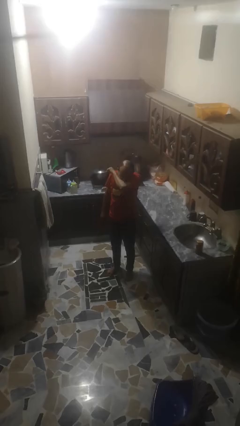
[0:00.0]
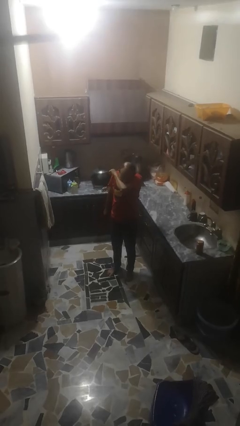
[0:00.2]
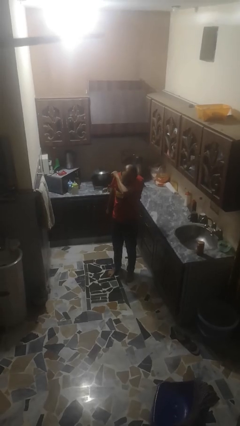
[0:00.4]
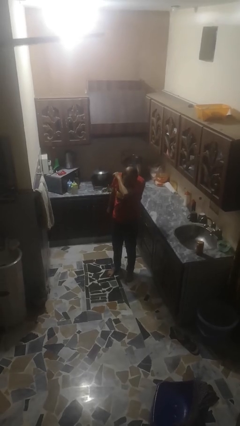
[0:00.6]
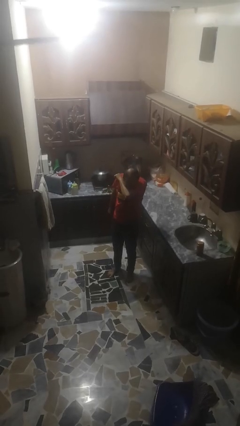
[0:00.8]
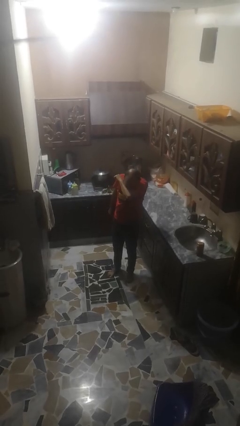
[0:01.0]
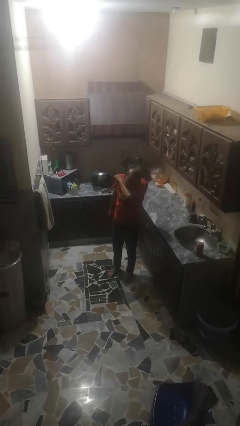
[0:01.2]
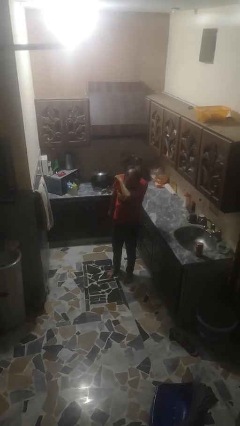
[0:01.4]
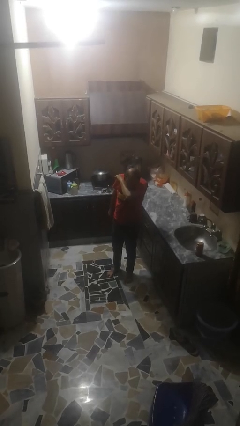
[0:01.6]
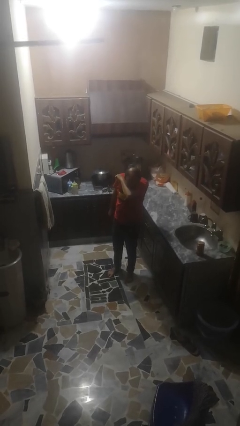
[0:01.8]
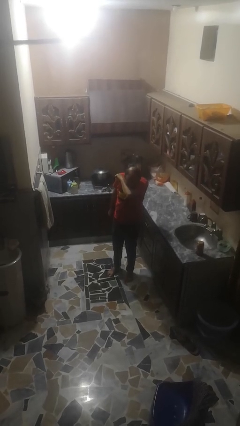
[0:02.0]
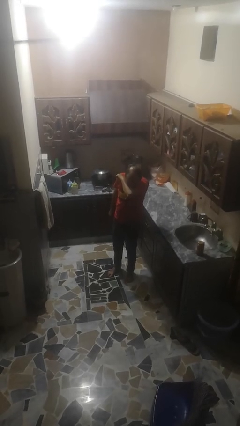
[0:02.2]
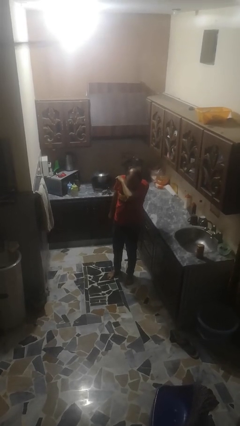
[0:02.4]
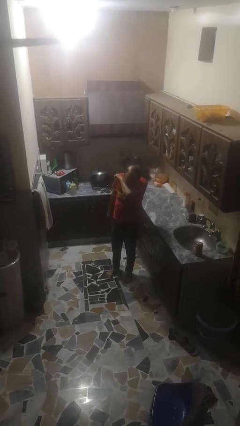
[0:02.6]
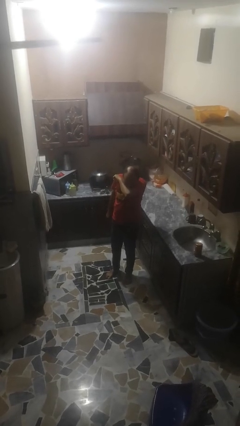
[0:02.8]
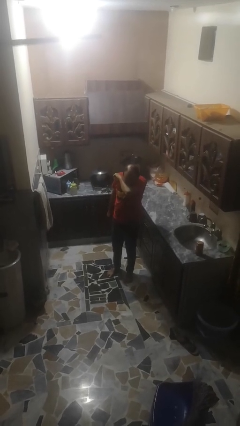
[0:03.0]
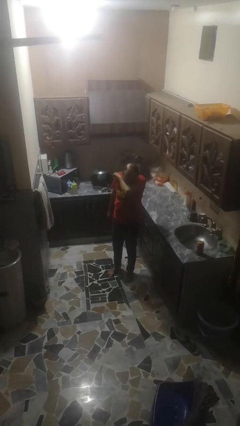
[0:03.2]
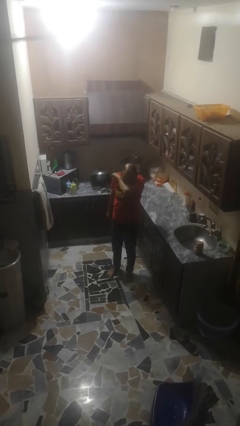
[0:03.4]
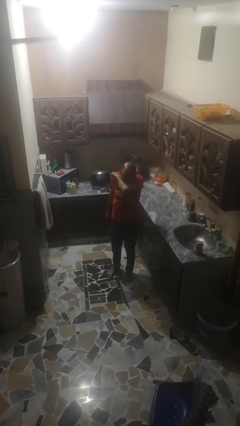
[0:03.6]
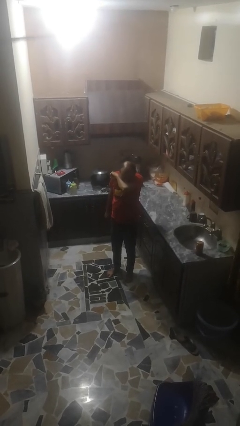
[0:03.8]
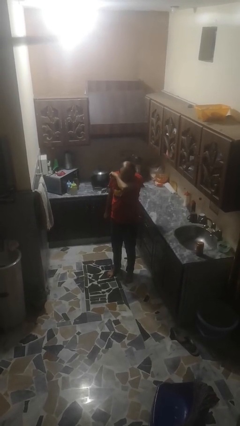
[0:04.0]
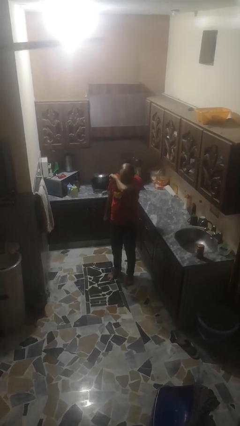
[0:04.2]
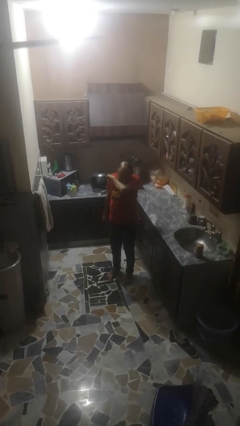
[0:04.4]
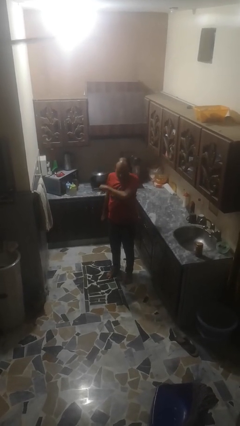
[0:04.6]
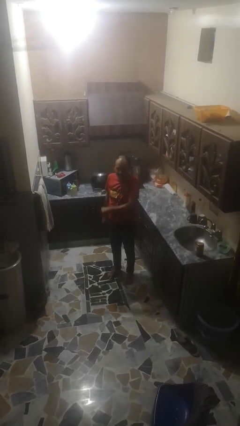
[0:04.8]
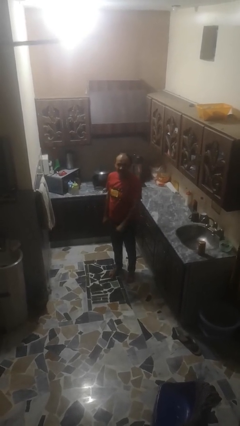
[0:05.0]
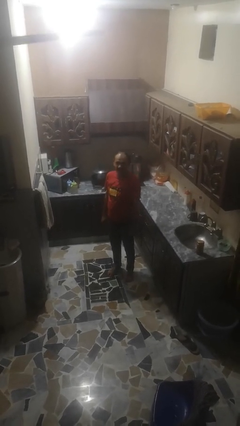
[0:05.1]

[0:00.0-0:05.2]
person sneezes into arm

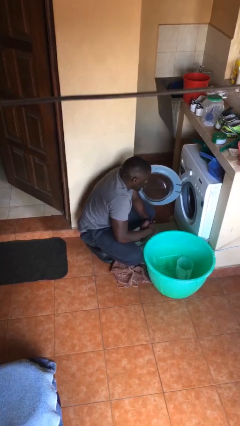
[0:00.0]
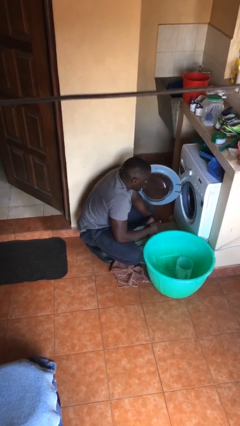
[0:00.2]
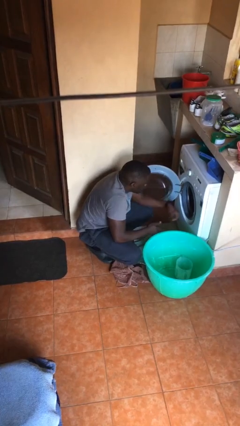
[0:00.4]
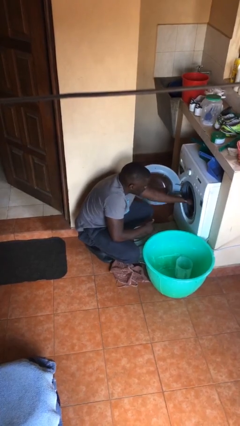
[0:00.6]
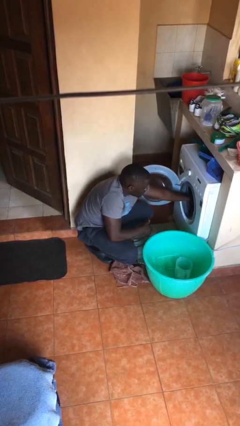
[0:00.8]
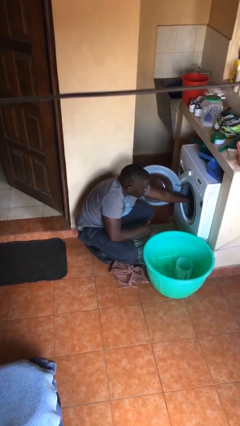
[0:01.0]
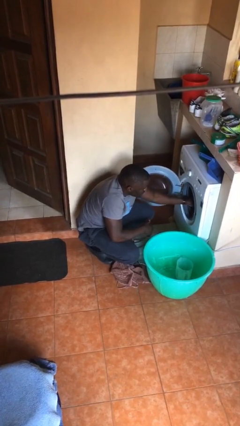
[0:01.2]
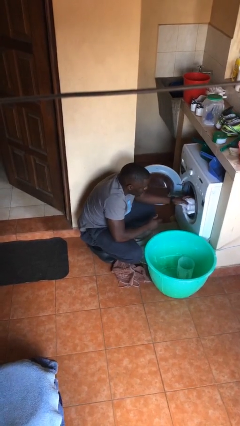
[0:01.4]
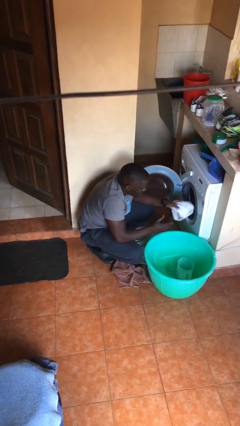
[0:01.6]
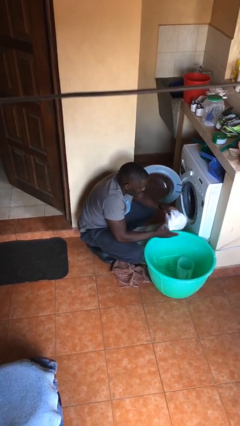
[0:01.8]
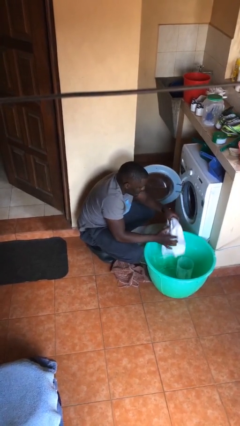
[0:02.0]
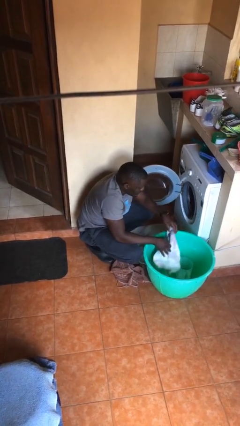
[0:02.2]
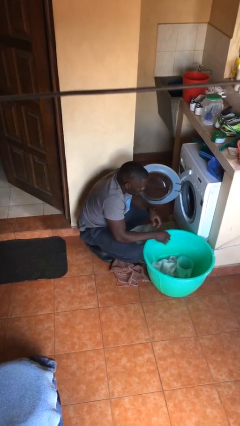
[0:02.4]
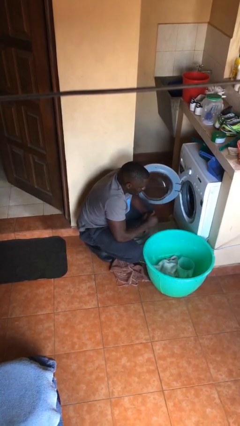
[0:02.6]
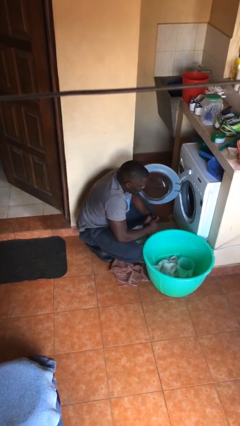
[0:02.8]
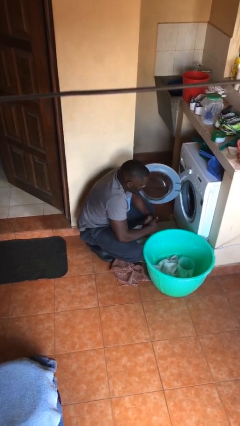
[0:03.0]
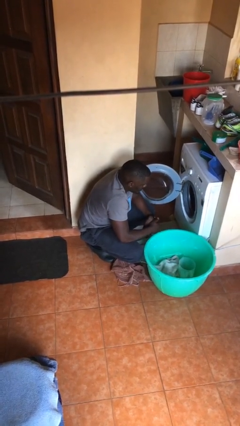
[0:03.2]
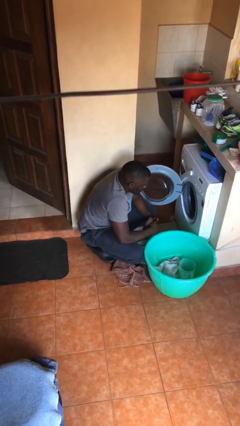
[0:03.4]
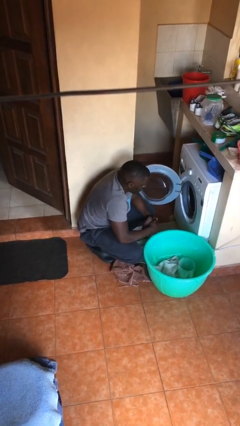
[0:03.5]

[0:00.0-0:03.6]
person unloads clotheswasher

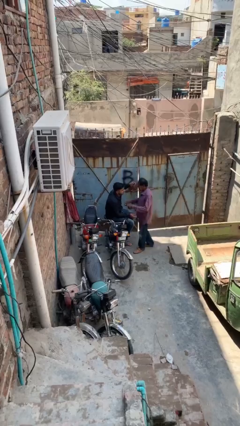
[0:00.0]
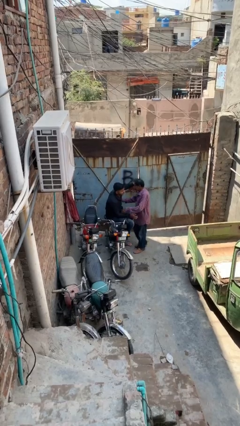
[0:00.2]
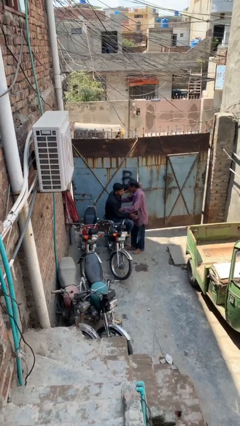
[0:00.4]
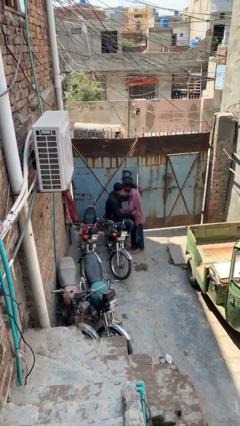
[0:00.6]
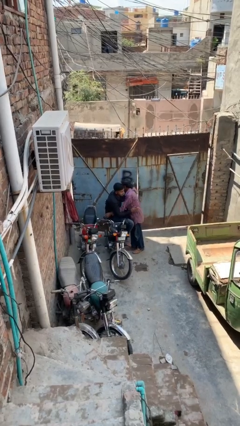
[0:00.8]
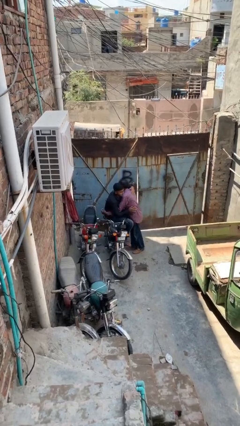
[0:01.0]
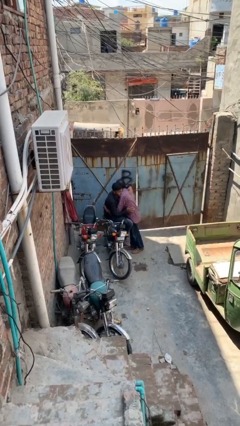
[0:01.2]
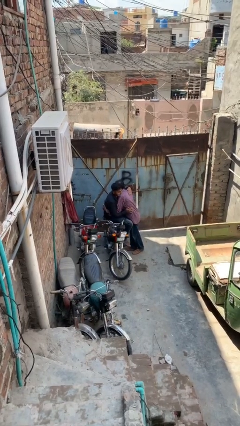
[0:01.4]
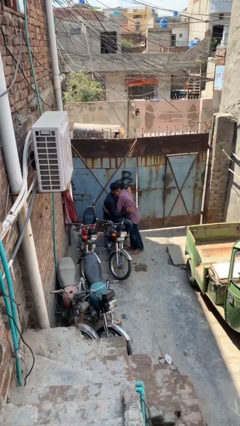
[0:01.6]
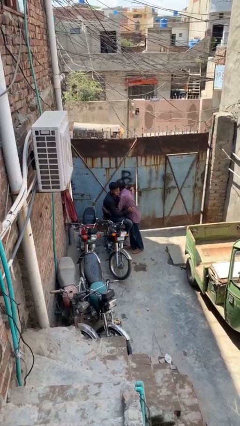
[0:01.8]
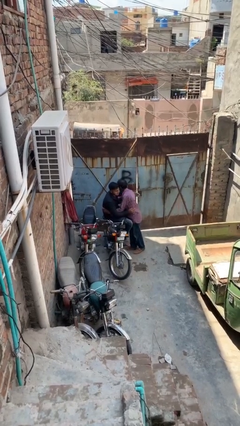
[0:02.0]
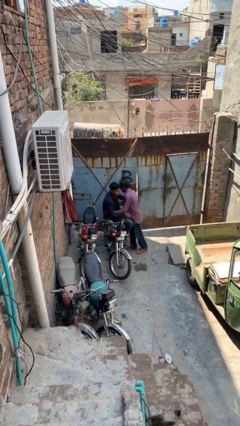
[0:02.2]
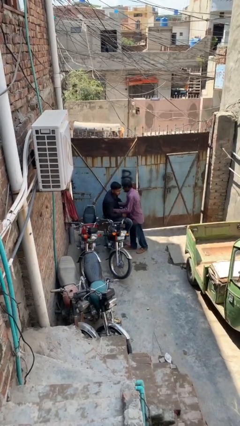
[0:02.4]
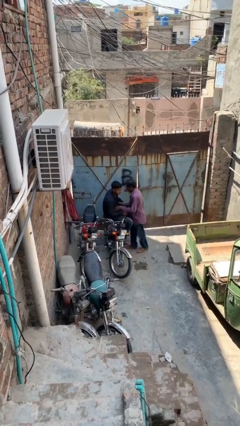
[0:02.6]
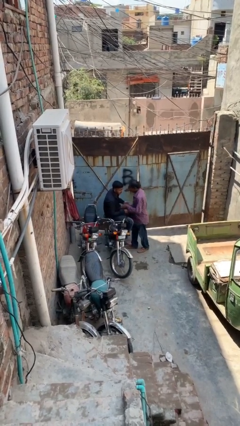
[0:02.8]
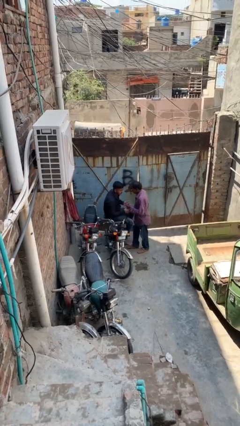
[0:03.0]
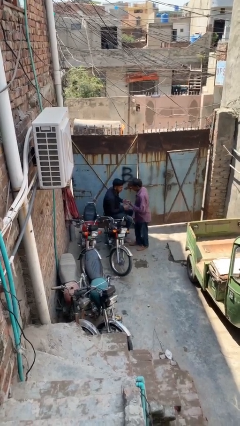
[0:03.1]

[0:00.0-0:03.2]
person embraces person

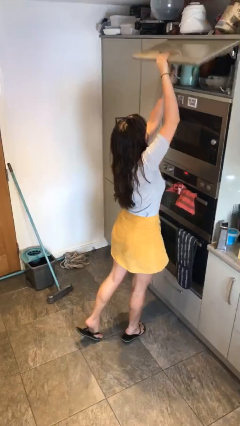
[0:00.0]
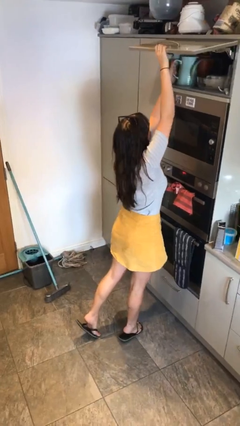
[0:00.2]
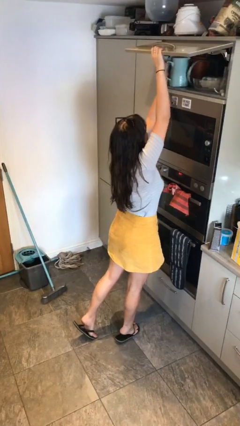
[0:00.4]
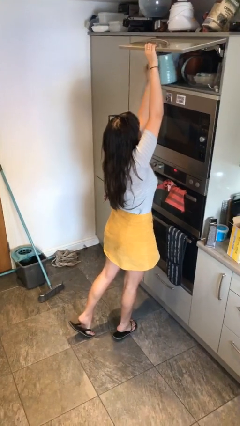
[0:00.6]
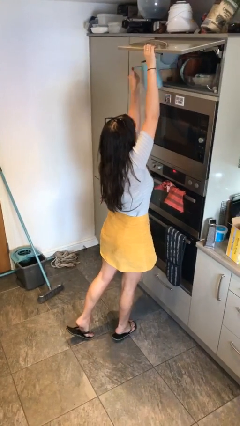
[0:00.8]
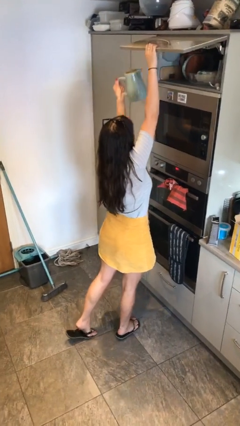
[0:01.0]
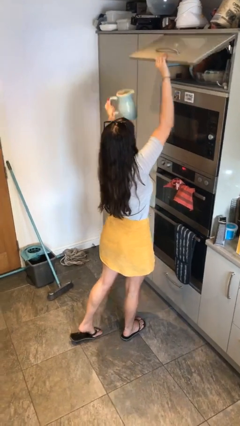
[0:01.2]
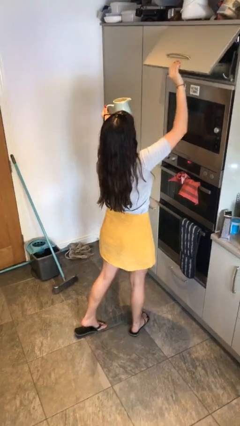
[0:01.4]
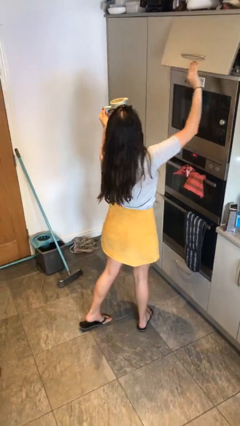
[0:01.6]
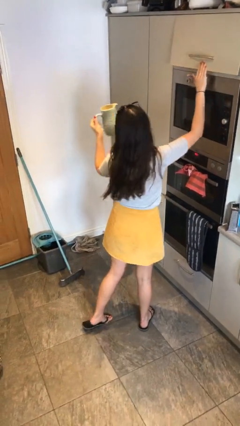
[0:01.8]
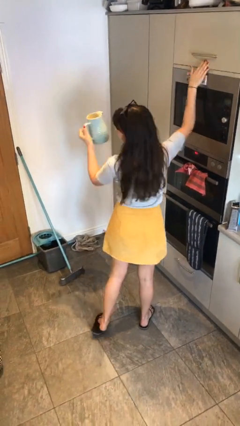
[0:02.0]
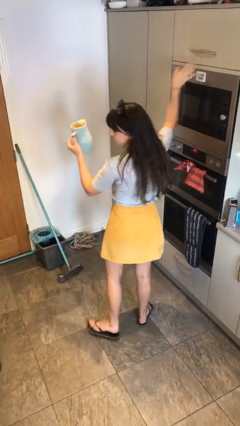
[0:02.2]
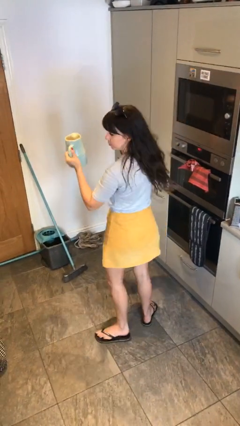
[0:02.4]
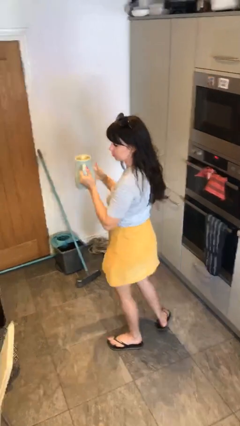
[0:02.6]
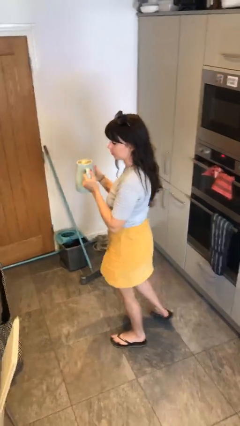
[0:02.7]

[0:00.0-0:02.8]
person picks up object from shelf

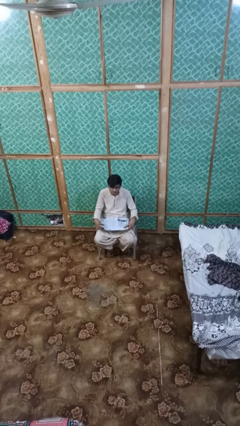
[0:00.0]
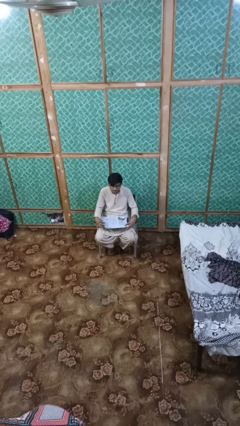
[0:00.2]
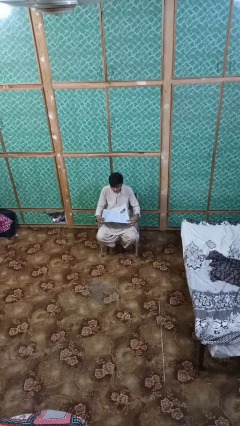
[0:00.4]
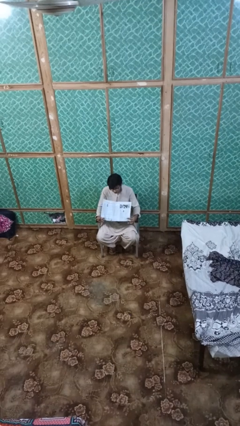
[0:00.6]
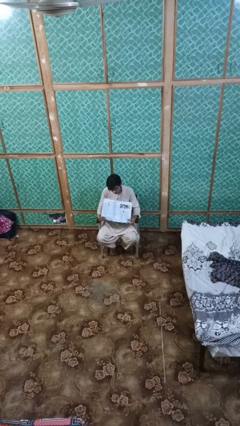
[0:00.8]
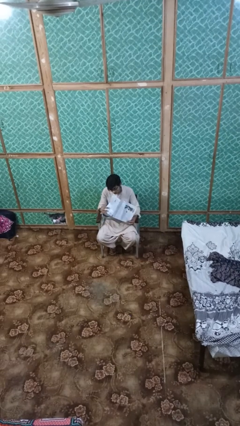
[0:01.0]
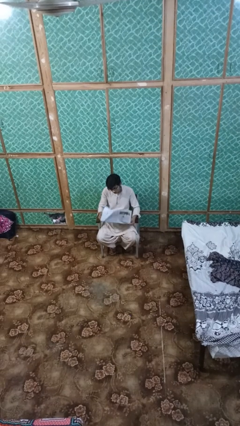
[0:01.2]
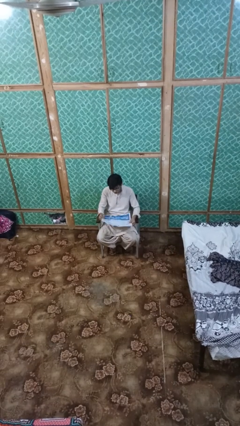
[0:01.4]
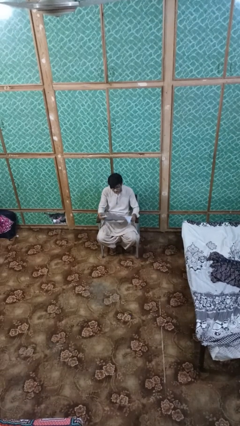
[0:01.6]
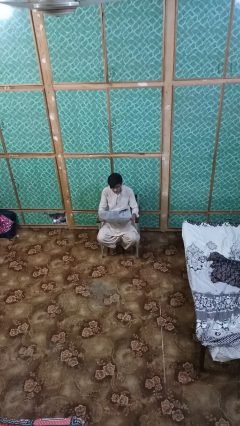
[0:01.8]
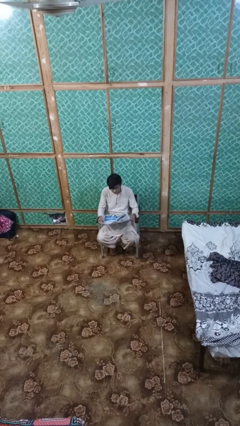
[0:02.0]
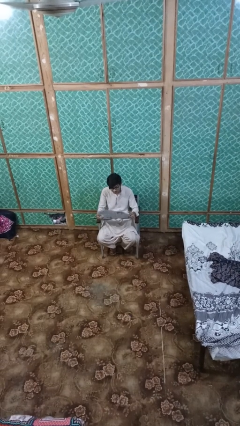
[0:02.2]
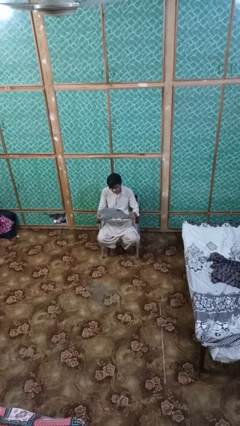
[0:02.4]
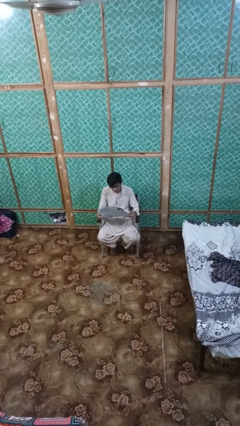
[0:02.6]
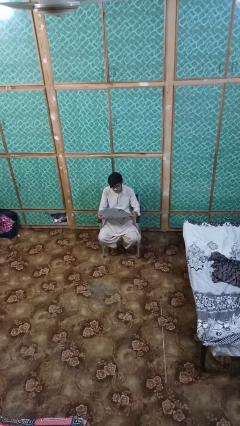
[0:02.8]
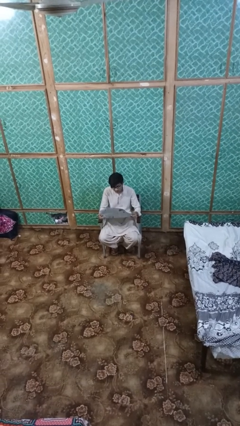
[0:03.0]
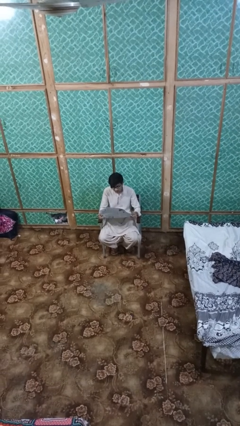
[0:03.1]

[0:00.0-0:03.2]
person reads newspaper
